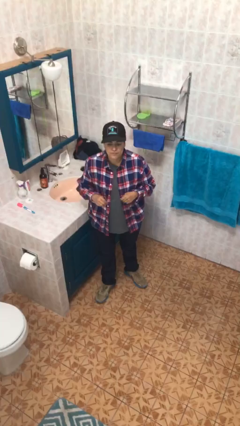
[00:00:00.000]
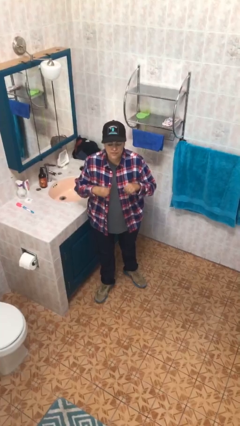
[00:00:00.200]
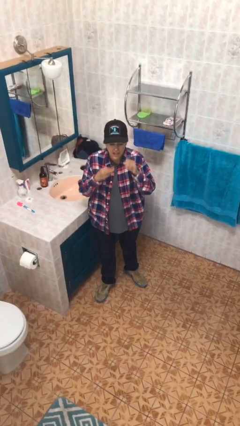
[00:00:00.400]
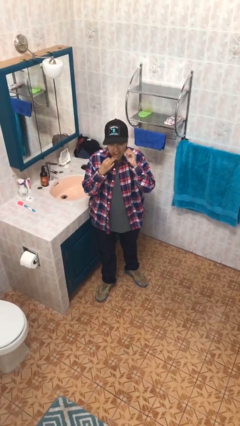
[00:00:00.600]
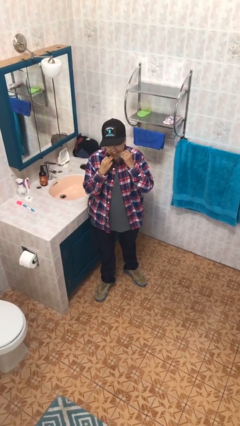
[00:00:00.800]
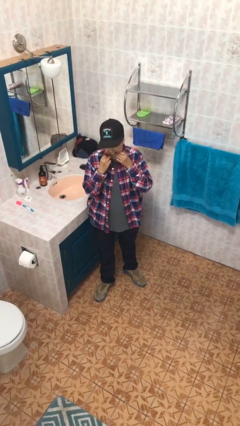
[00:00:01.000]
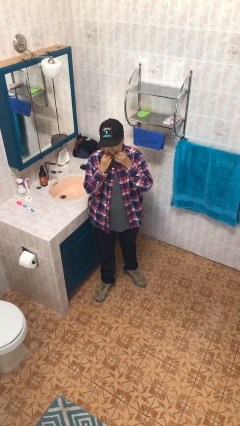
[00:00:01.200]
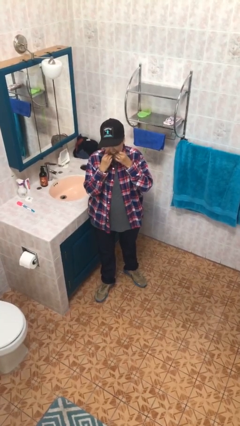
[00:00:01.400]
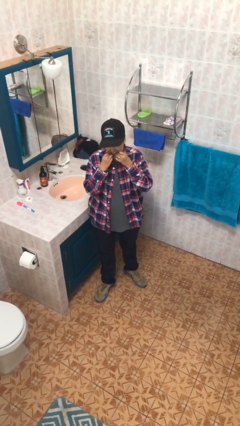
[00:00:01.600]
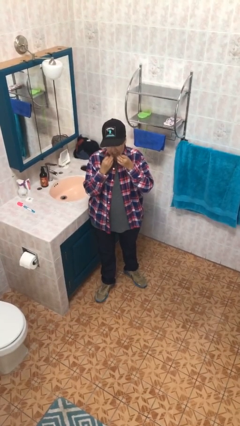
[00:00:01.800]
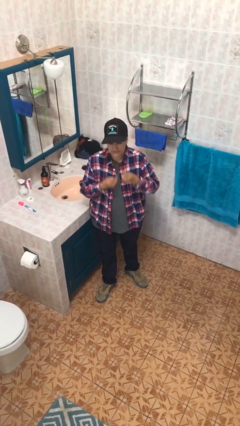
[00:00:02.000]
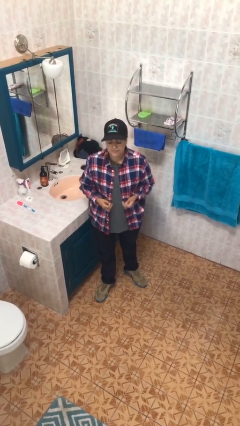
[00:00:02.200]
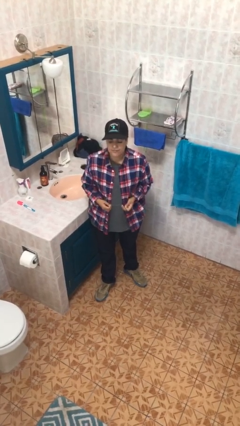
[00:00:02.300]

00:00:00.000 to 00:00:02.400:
person flosses

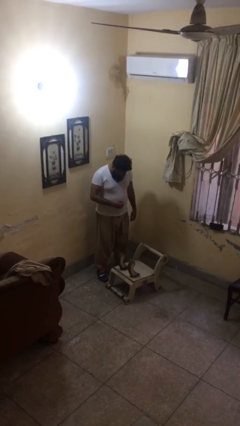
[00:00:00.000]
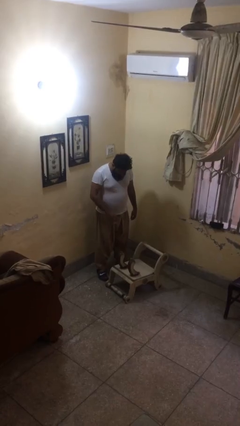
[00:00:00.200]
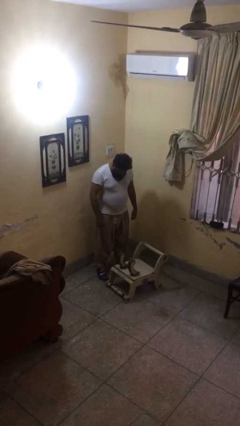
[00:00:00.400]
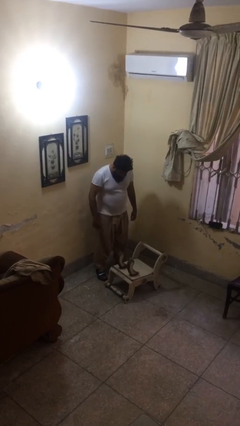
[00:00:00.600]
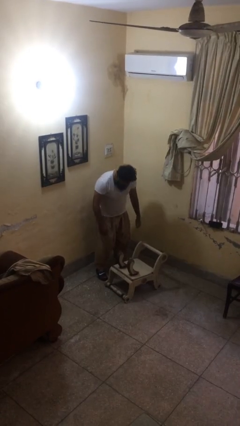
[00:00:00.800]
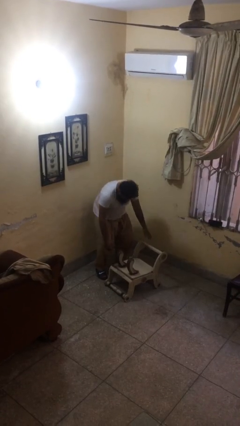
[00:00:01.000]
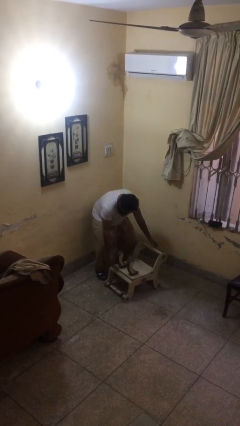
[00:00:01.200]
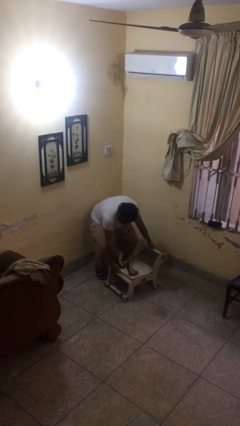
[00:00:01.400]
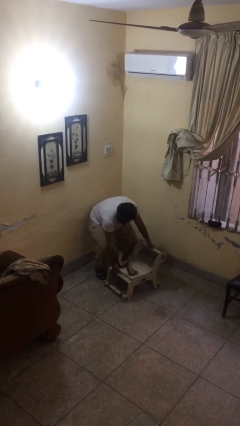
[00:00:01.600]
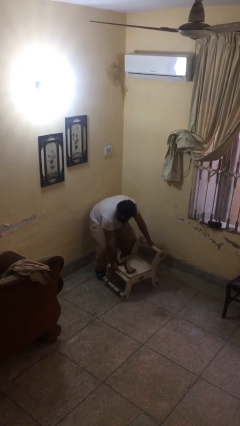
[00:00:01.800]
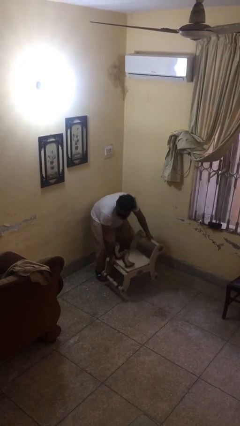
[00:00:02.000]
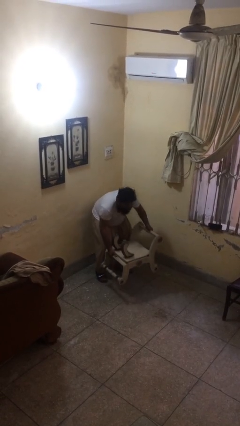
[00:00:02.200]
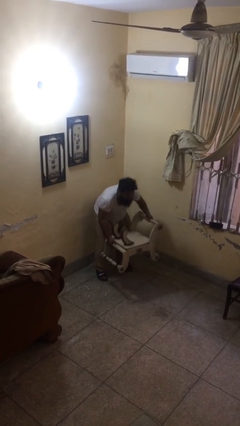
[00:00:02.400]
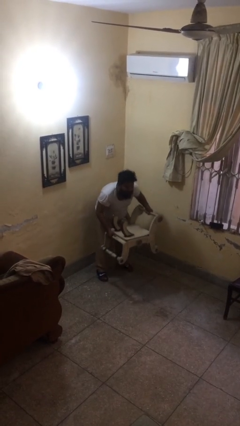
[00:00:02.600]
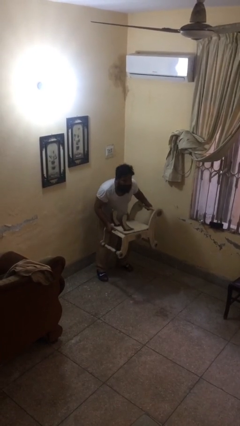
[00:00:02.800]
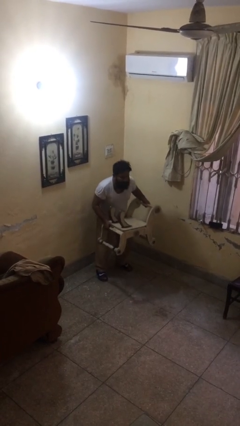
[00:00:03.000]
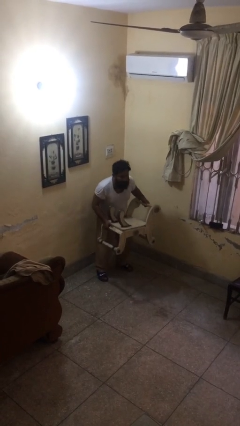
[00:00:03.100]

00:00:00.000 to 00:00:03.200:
person picks up object from floor

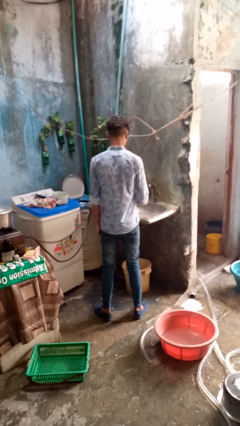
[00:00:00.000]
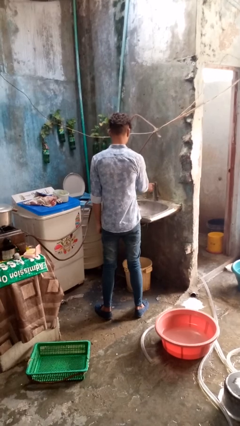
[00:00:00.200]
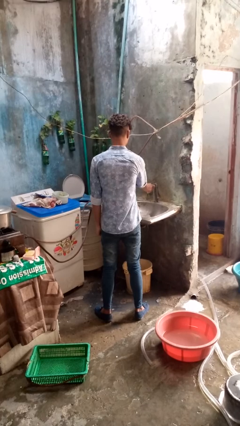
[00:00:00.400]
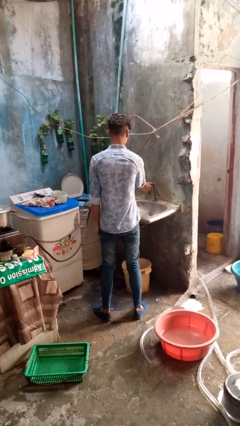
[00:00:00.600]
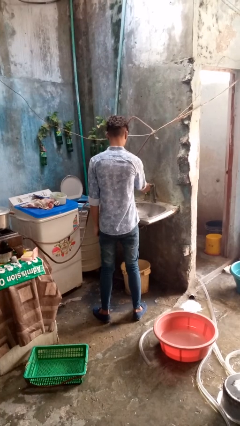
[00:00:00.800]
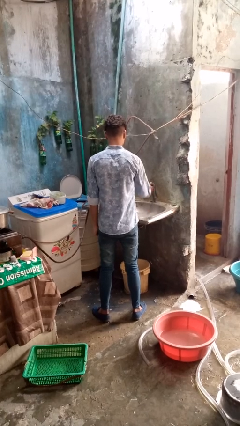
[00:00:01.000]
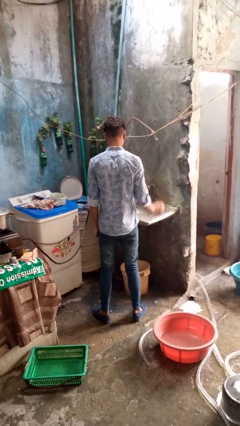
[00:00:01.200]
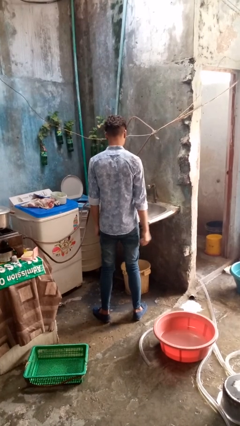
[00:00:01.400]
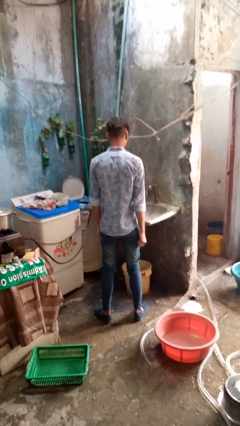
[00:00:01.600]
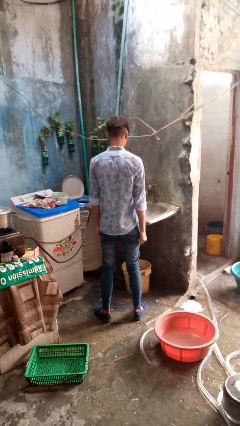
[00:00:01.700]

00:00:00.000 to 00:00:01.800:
person turns off faucet

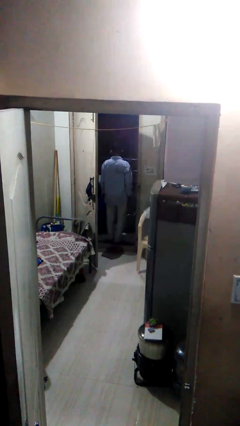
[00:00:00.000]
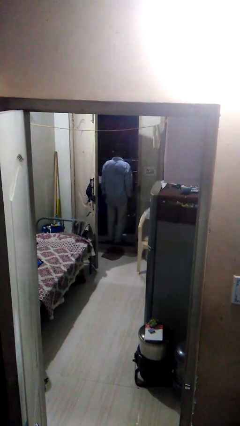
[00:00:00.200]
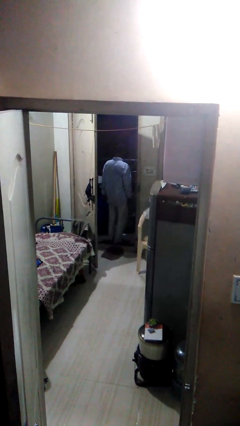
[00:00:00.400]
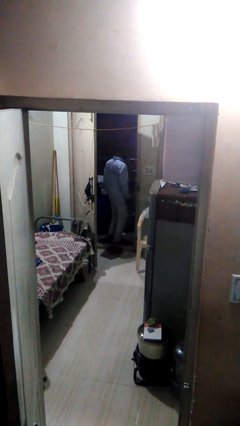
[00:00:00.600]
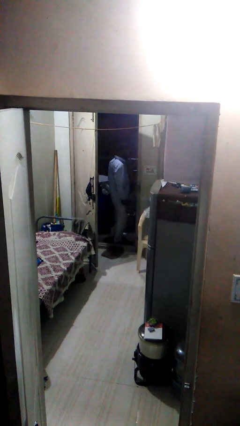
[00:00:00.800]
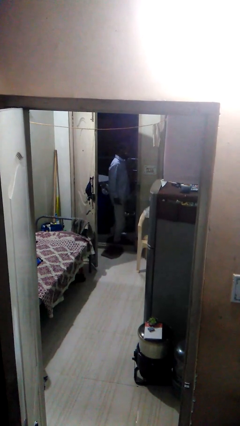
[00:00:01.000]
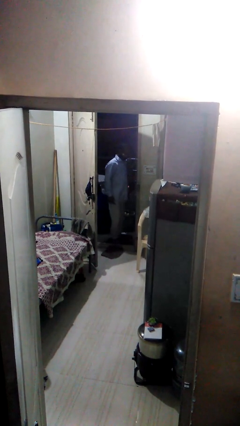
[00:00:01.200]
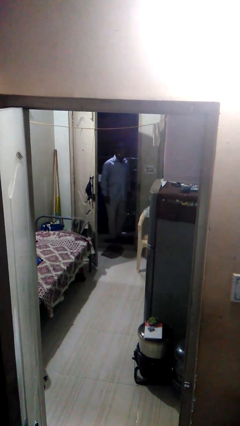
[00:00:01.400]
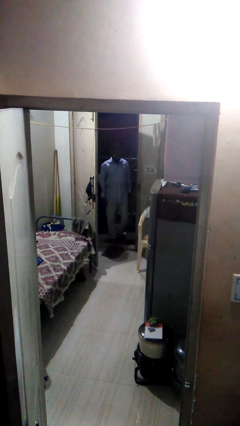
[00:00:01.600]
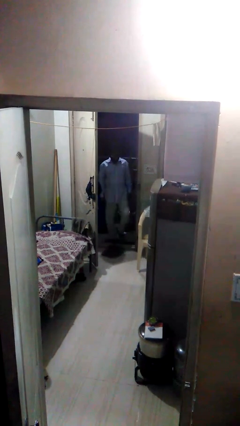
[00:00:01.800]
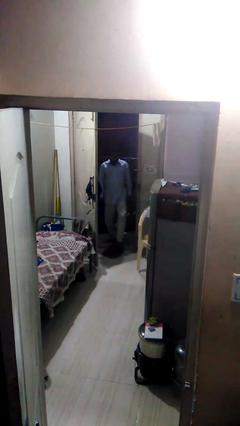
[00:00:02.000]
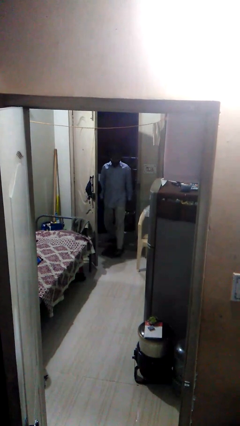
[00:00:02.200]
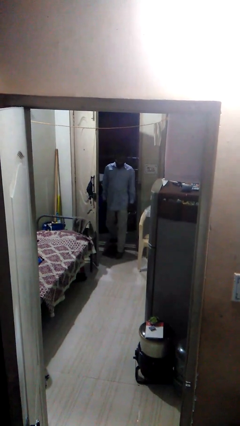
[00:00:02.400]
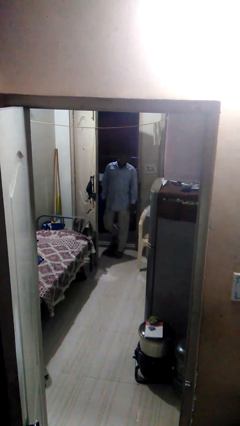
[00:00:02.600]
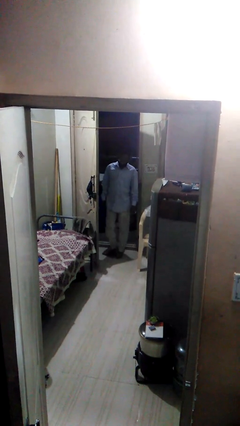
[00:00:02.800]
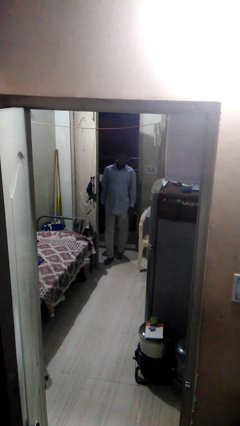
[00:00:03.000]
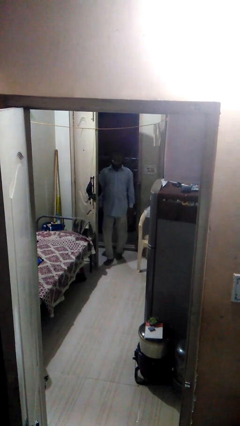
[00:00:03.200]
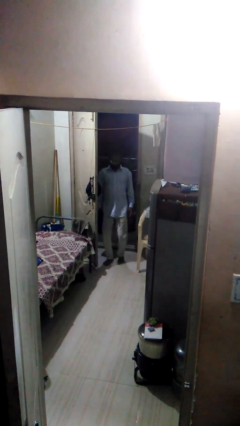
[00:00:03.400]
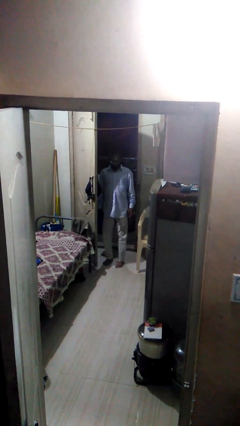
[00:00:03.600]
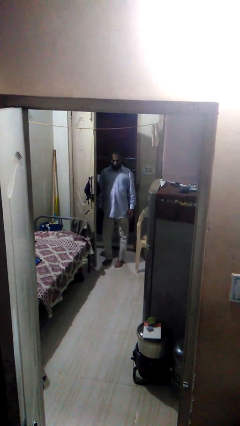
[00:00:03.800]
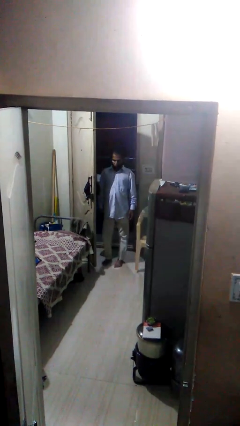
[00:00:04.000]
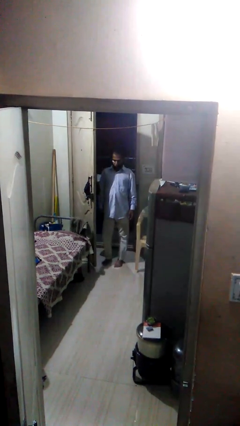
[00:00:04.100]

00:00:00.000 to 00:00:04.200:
person enters scene through structure

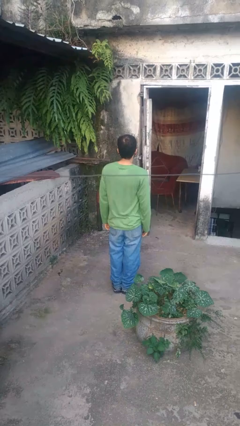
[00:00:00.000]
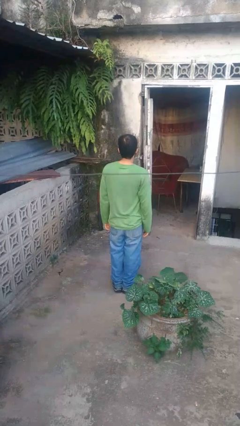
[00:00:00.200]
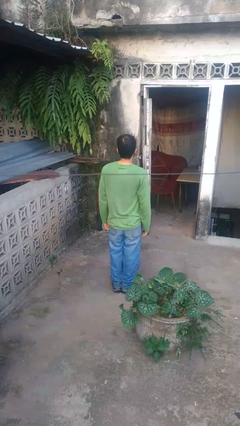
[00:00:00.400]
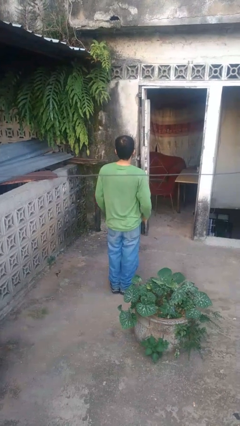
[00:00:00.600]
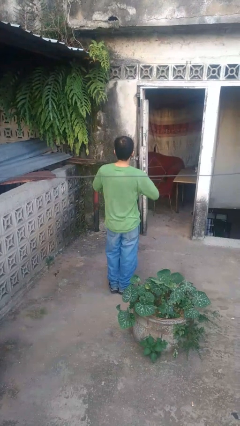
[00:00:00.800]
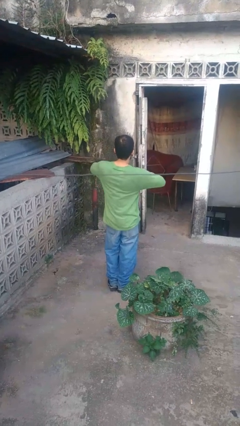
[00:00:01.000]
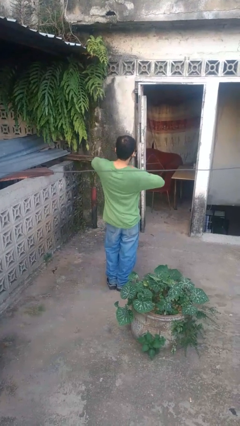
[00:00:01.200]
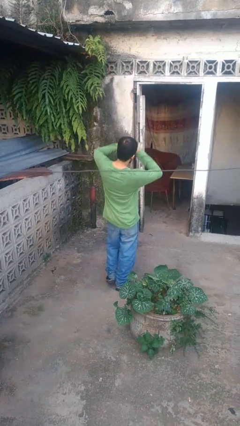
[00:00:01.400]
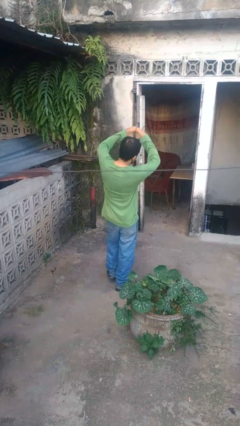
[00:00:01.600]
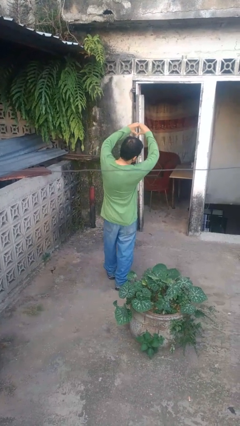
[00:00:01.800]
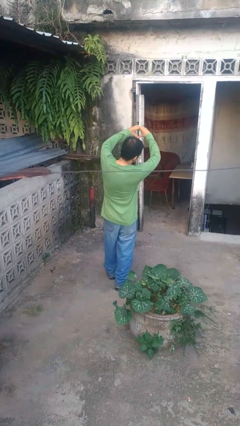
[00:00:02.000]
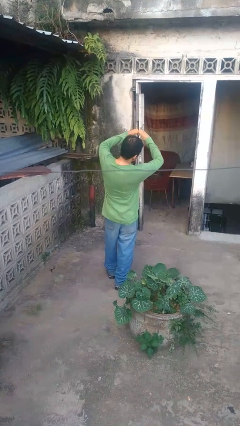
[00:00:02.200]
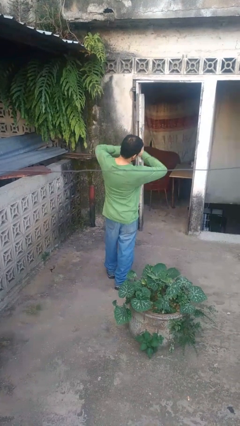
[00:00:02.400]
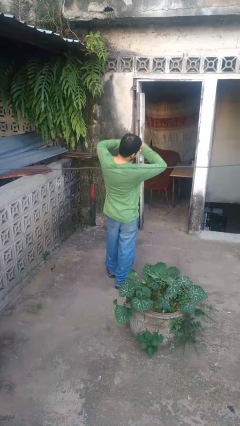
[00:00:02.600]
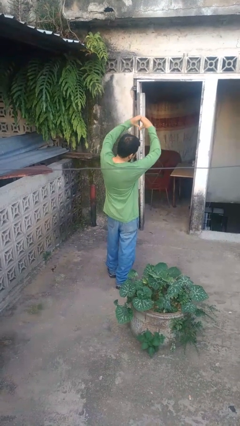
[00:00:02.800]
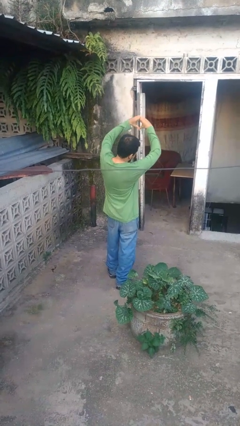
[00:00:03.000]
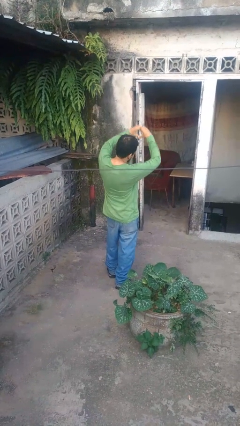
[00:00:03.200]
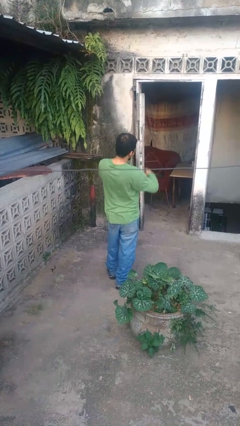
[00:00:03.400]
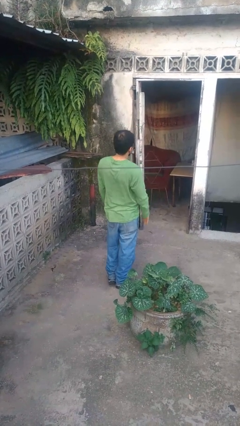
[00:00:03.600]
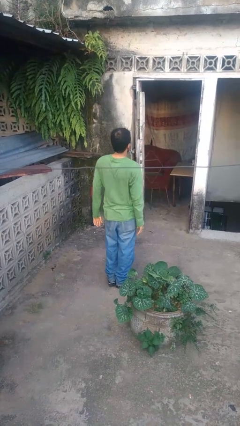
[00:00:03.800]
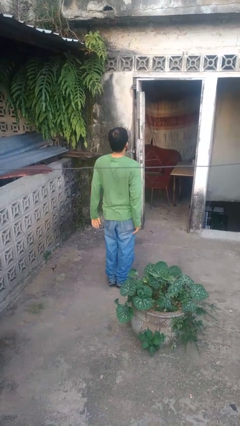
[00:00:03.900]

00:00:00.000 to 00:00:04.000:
person gestures heart

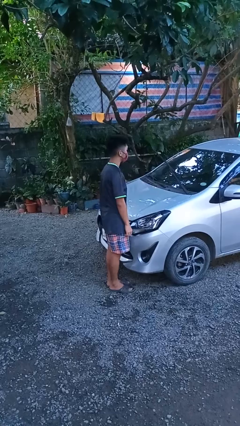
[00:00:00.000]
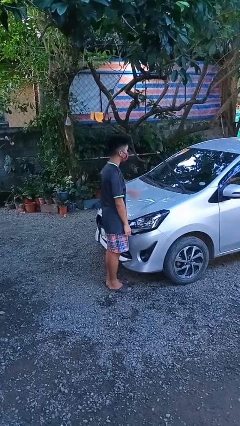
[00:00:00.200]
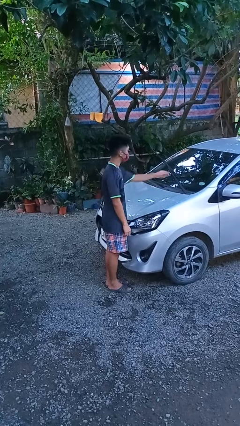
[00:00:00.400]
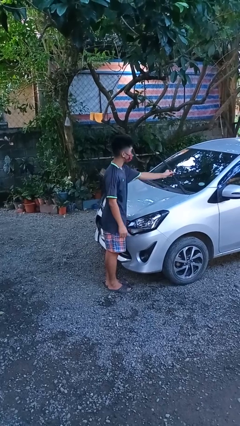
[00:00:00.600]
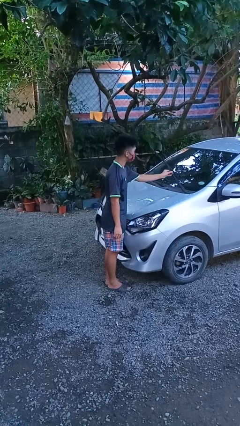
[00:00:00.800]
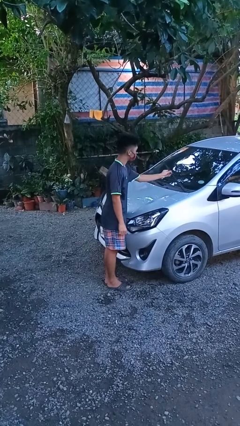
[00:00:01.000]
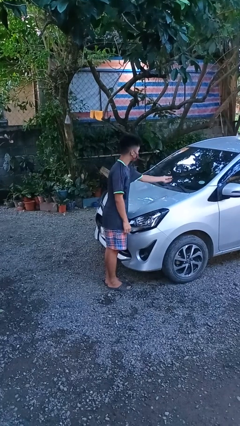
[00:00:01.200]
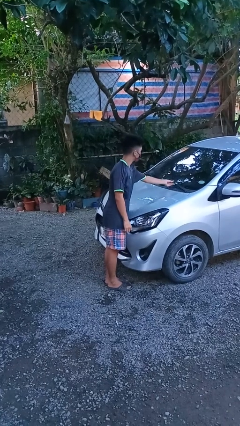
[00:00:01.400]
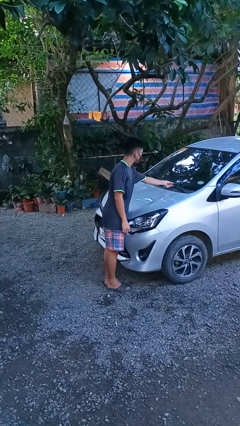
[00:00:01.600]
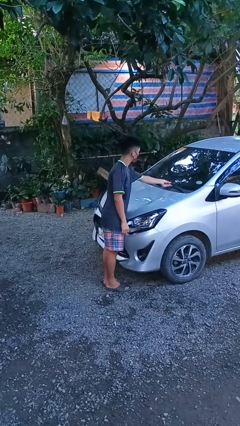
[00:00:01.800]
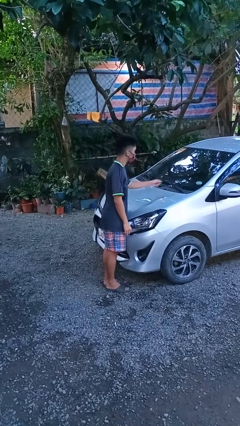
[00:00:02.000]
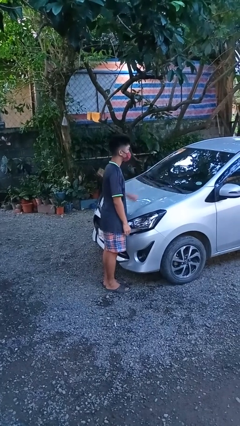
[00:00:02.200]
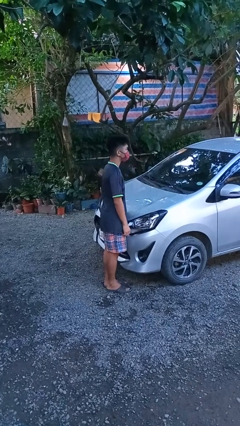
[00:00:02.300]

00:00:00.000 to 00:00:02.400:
person flips down car wipers
